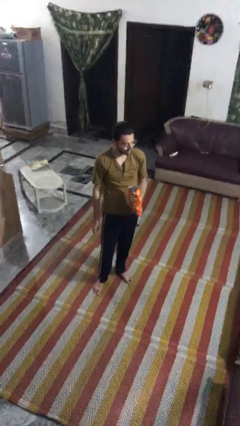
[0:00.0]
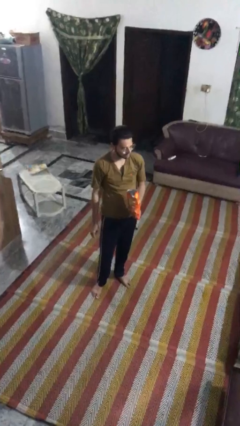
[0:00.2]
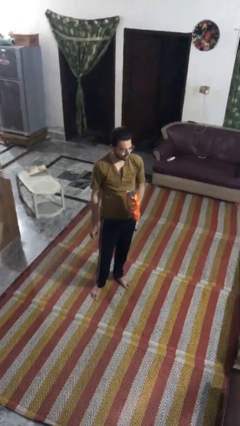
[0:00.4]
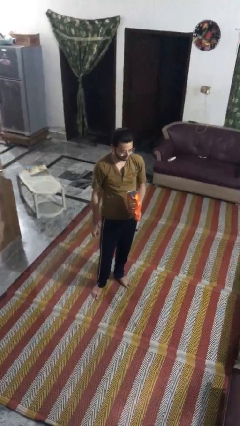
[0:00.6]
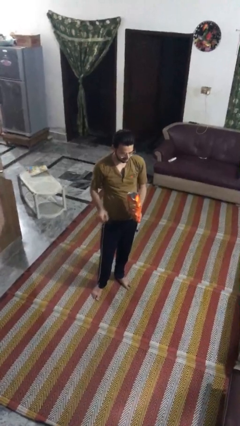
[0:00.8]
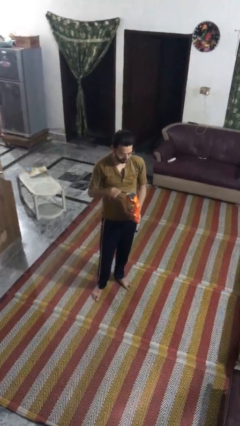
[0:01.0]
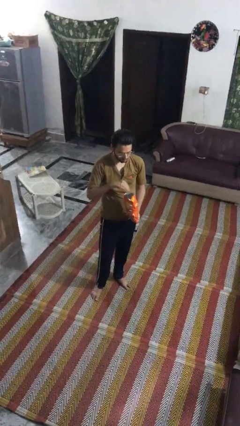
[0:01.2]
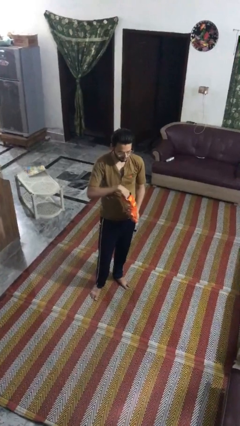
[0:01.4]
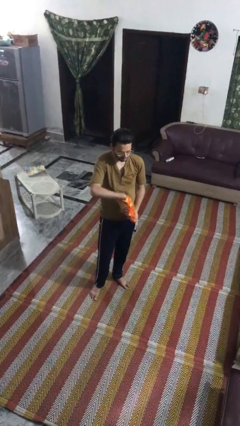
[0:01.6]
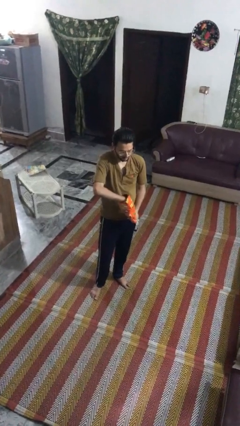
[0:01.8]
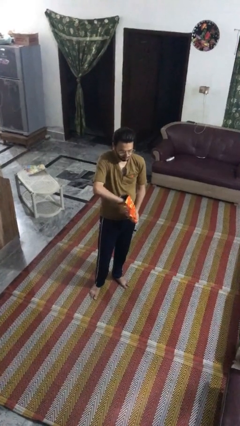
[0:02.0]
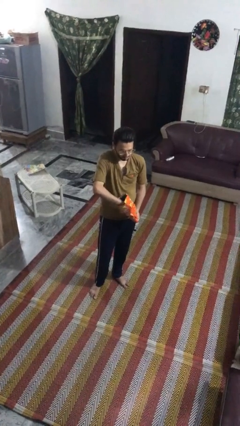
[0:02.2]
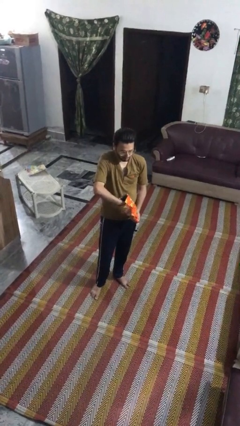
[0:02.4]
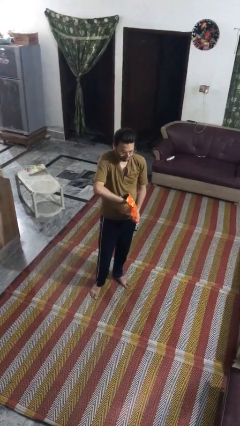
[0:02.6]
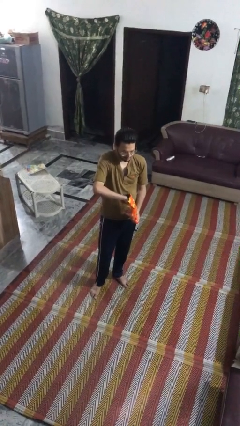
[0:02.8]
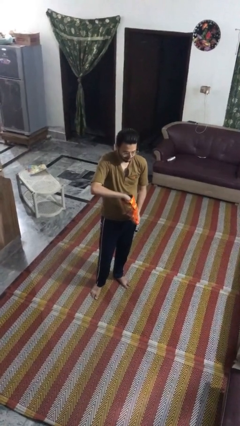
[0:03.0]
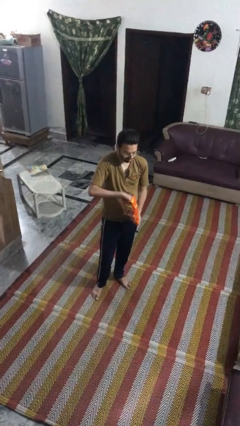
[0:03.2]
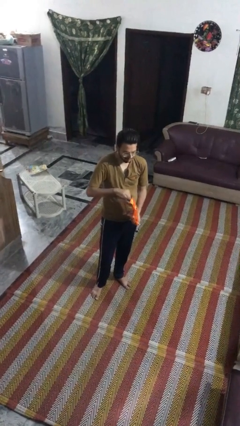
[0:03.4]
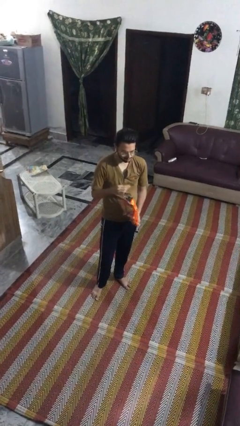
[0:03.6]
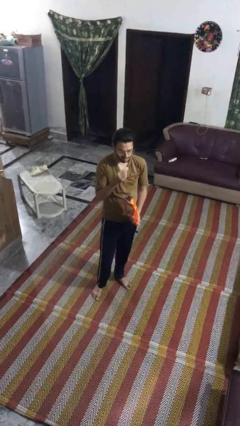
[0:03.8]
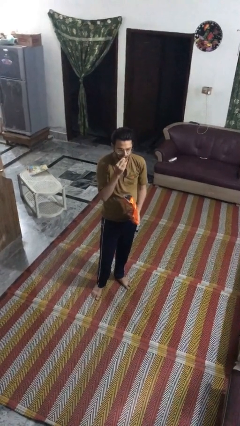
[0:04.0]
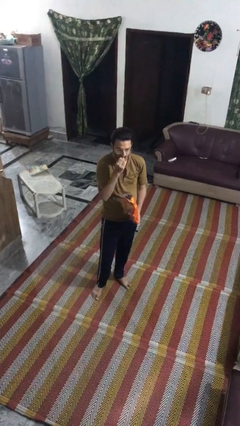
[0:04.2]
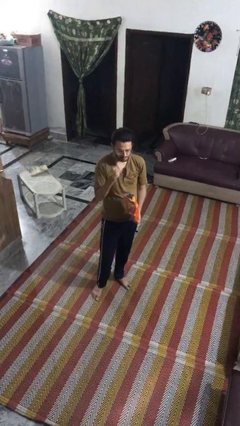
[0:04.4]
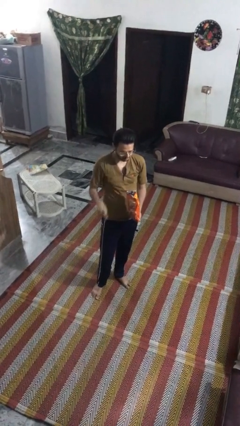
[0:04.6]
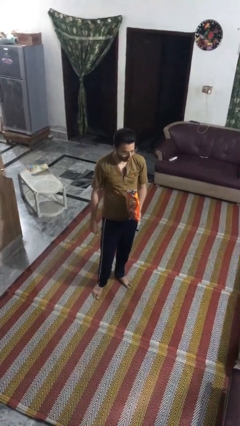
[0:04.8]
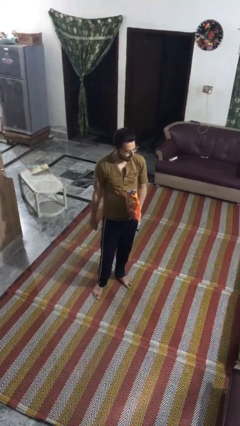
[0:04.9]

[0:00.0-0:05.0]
person eats snack from bag

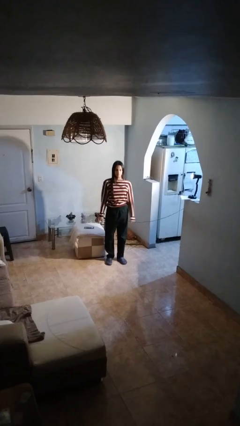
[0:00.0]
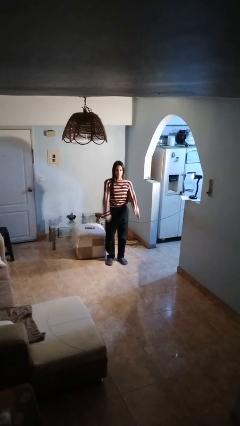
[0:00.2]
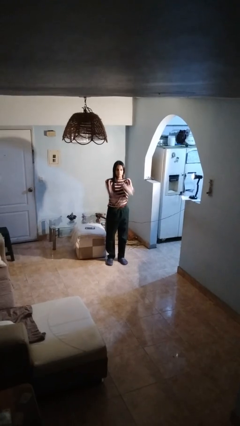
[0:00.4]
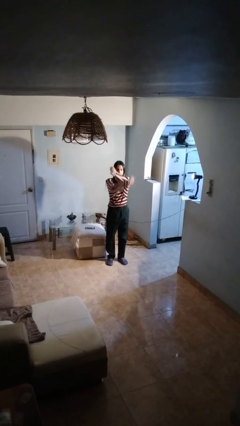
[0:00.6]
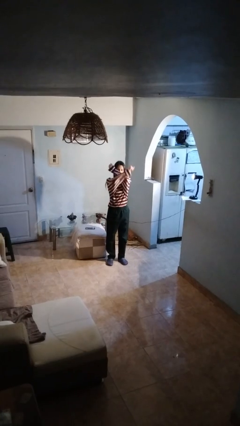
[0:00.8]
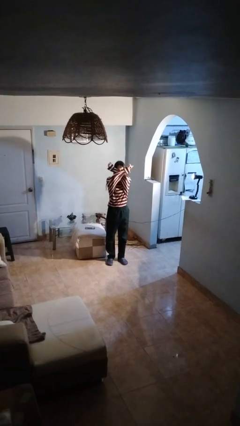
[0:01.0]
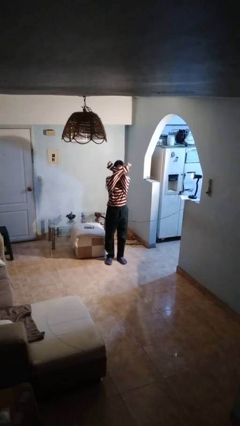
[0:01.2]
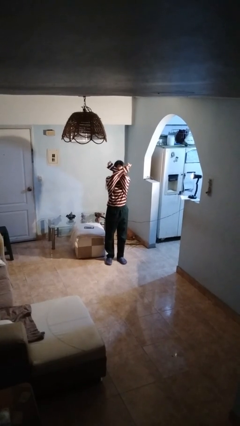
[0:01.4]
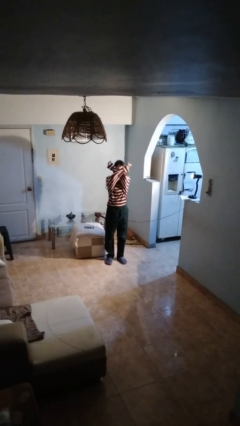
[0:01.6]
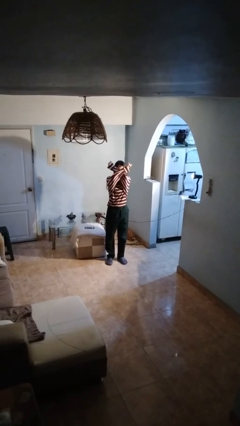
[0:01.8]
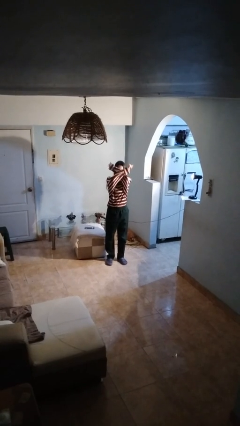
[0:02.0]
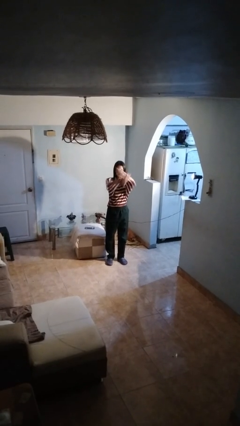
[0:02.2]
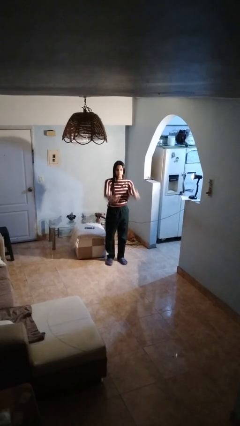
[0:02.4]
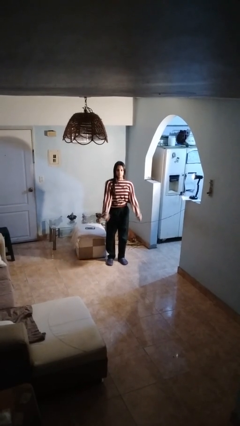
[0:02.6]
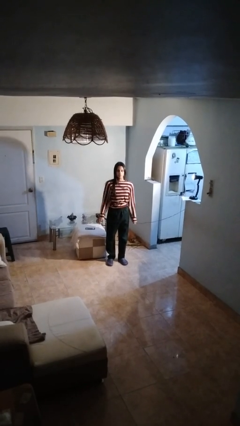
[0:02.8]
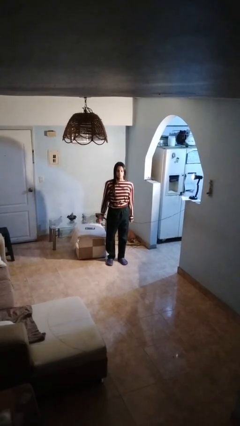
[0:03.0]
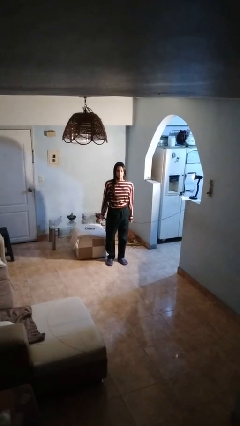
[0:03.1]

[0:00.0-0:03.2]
person gestures arms x

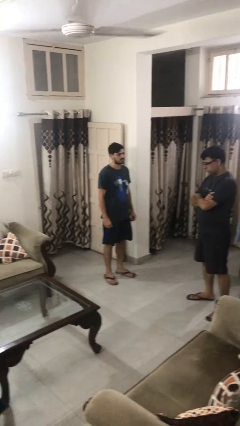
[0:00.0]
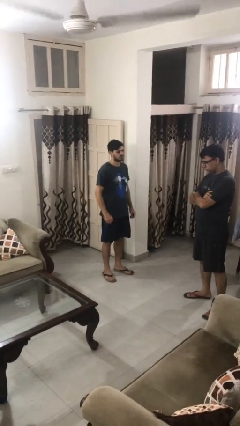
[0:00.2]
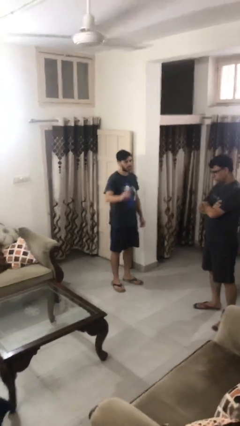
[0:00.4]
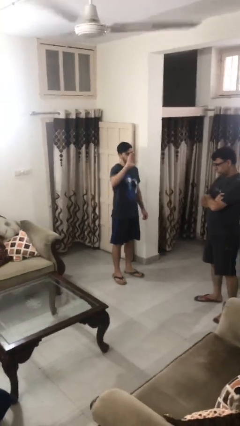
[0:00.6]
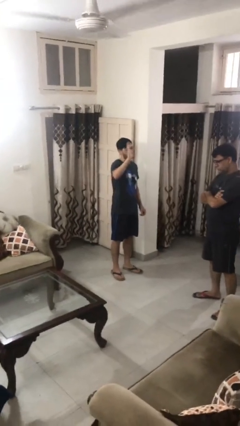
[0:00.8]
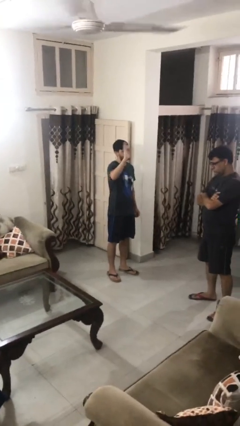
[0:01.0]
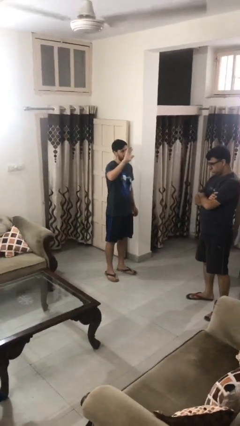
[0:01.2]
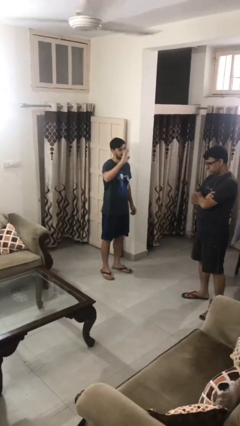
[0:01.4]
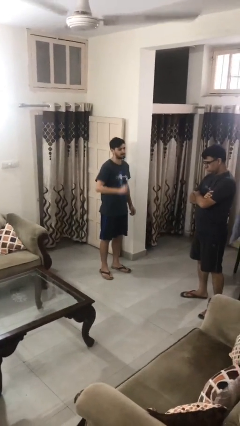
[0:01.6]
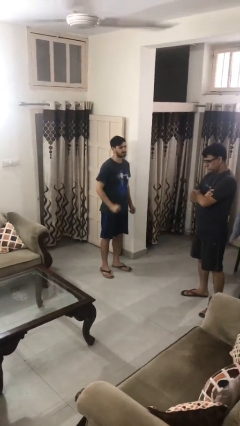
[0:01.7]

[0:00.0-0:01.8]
person waves at person

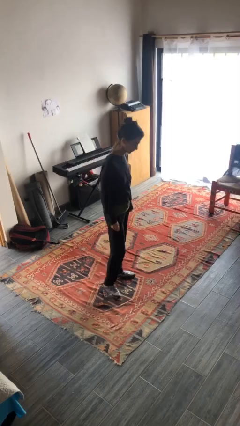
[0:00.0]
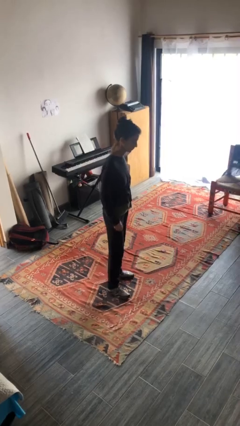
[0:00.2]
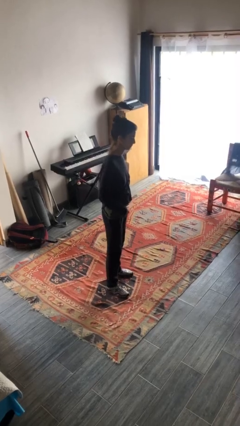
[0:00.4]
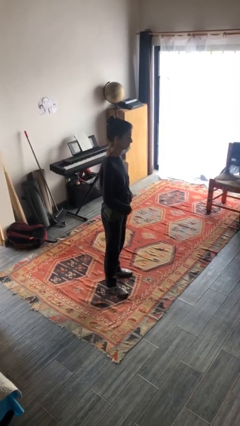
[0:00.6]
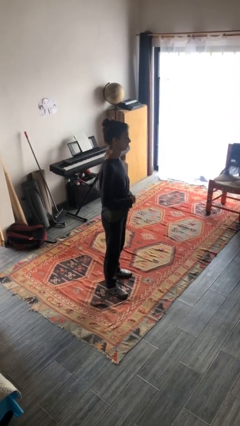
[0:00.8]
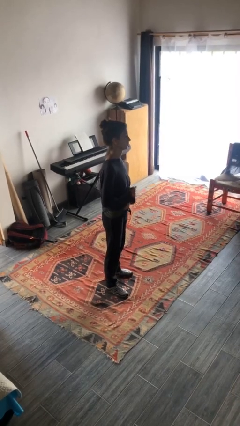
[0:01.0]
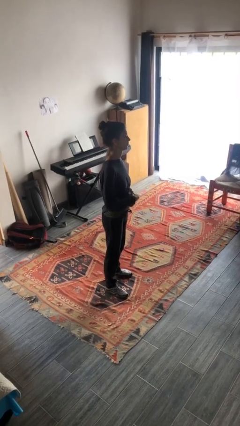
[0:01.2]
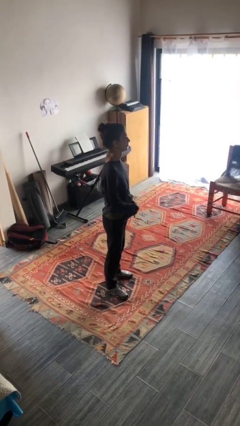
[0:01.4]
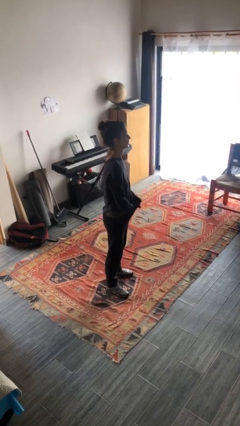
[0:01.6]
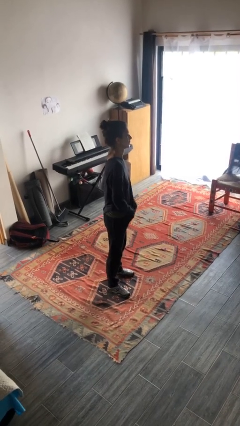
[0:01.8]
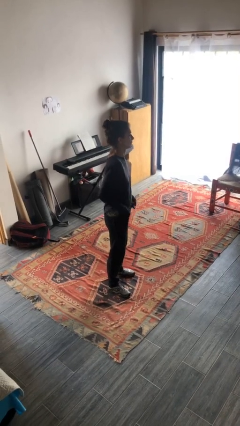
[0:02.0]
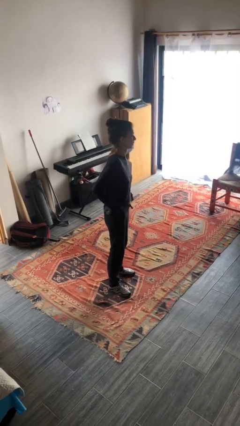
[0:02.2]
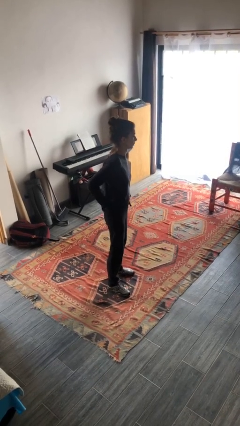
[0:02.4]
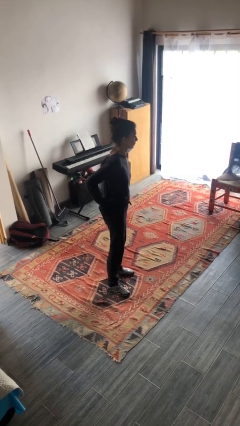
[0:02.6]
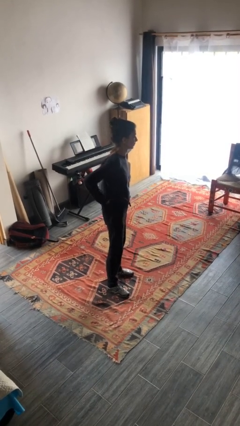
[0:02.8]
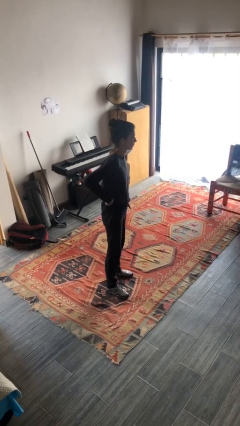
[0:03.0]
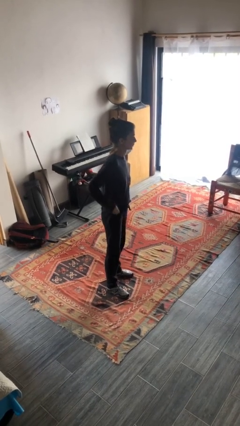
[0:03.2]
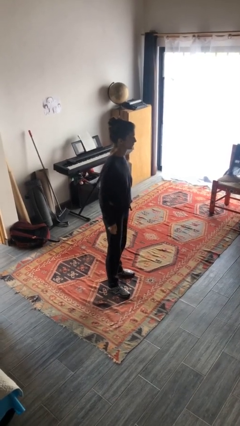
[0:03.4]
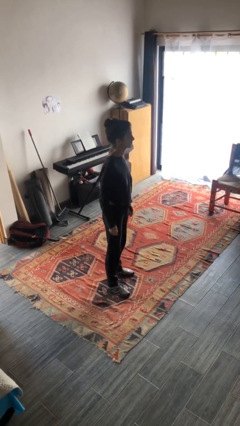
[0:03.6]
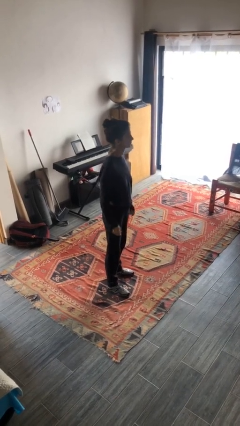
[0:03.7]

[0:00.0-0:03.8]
person tucks in shirt

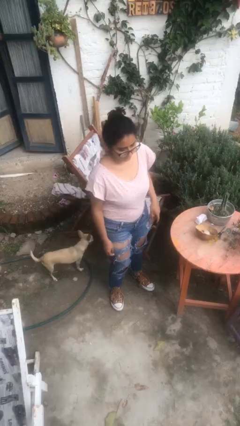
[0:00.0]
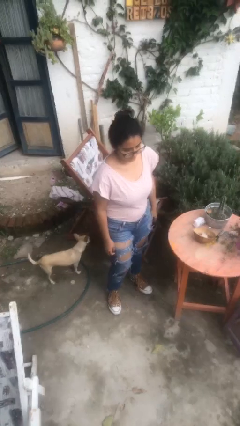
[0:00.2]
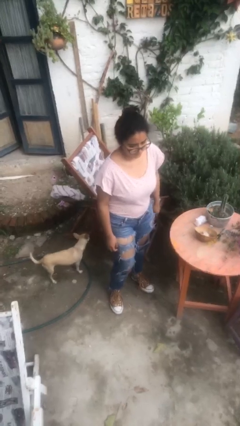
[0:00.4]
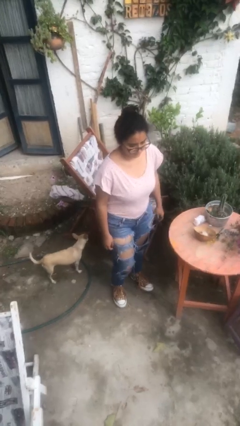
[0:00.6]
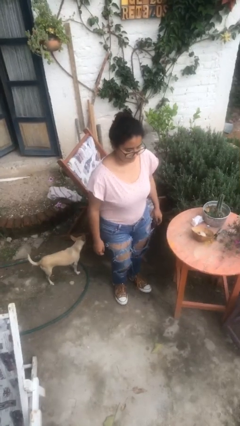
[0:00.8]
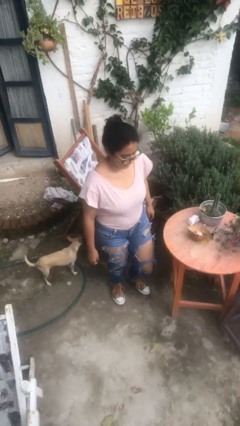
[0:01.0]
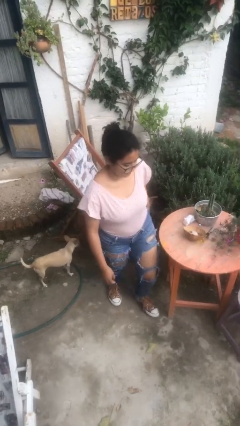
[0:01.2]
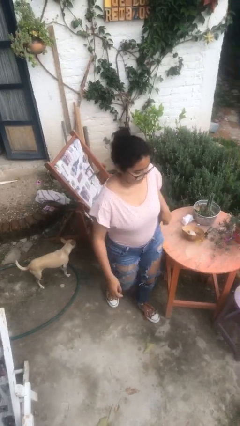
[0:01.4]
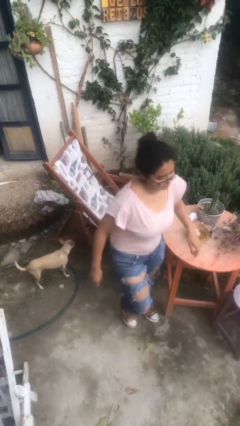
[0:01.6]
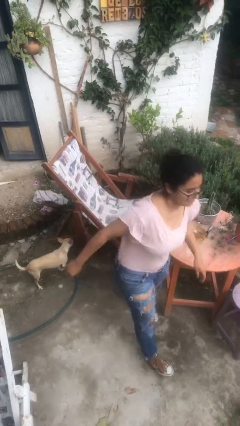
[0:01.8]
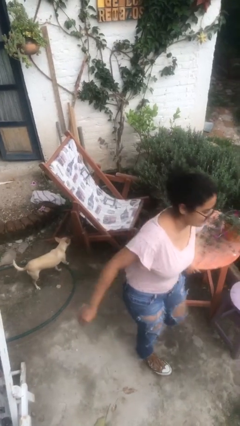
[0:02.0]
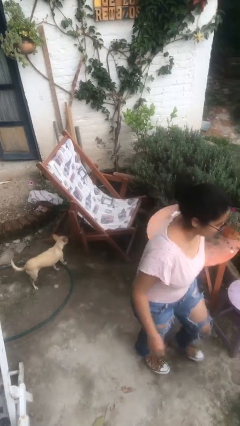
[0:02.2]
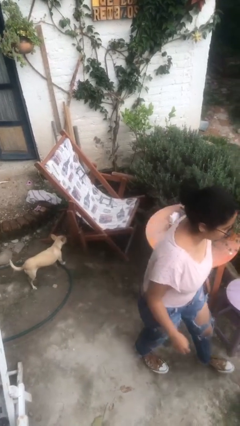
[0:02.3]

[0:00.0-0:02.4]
person bumps into table

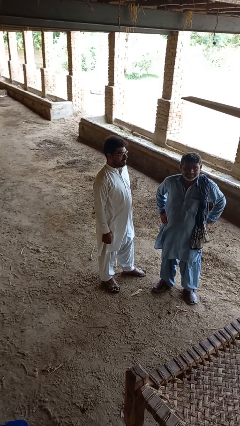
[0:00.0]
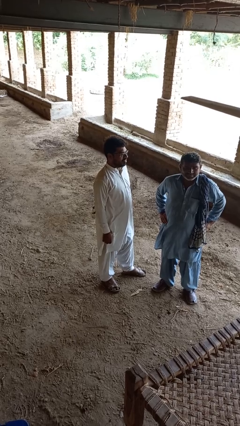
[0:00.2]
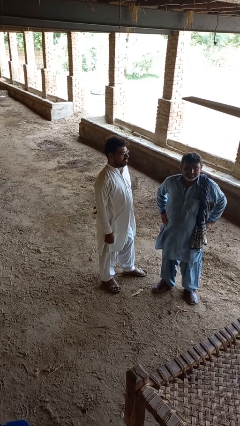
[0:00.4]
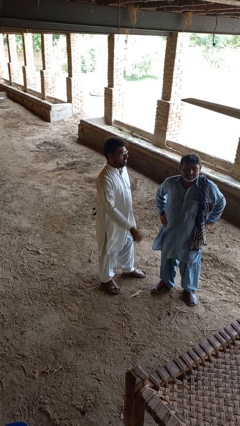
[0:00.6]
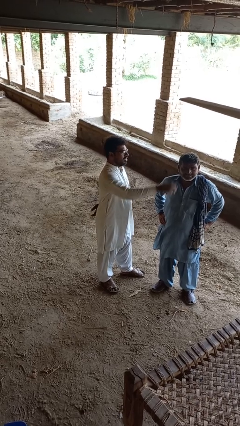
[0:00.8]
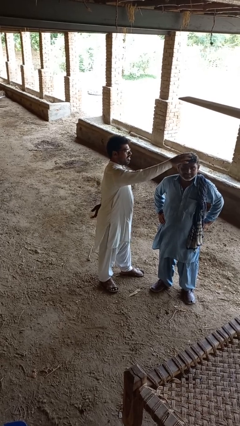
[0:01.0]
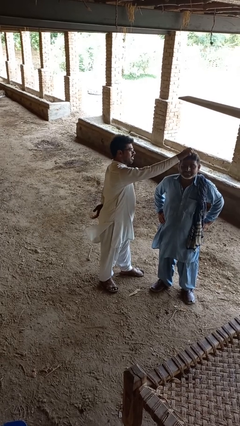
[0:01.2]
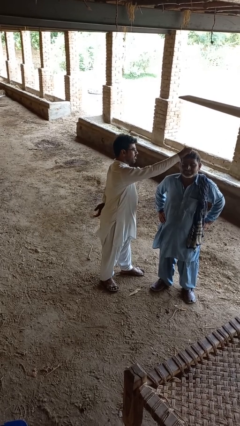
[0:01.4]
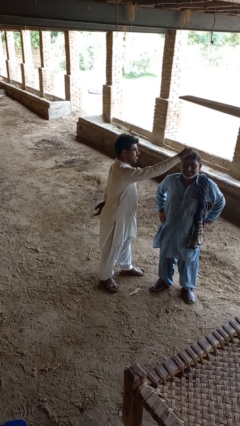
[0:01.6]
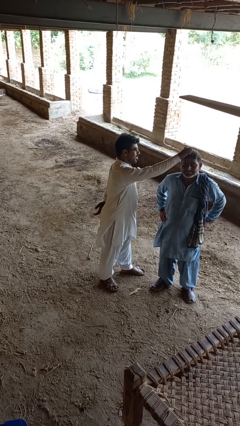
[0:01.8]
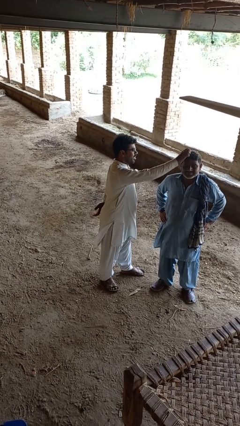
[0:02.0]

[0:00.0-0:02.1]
person grabs person by hair
